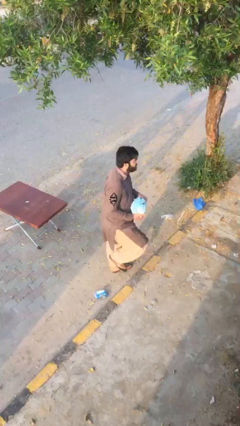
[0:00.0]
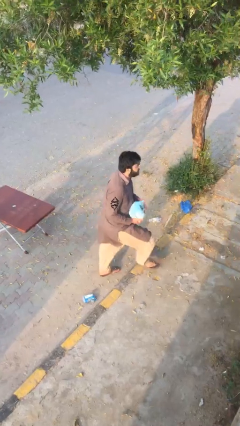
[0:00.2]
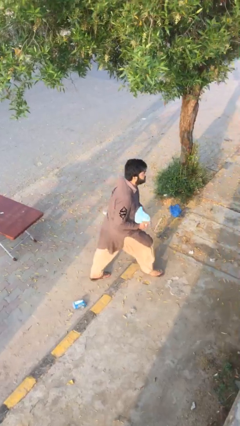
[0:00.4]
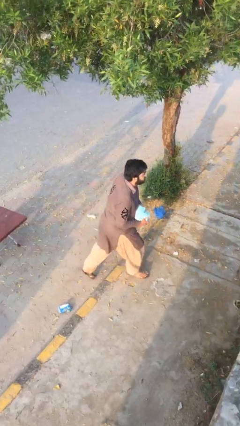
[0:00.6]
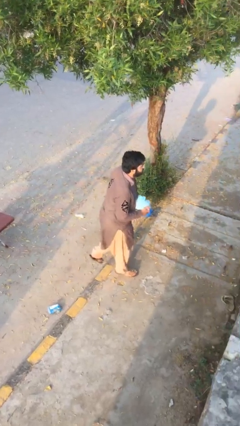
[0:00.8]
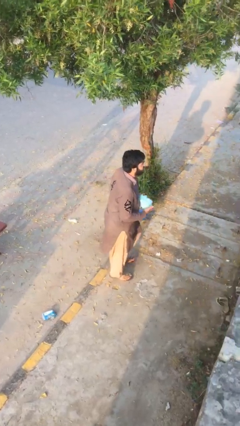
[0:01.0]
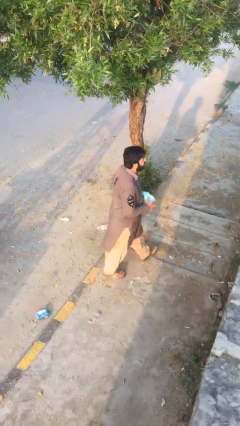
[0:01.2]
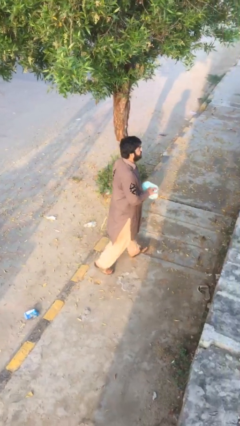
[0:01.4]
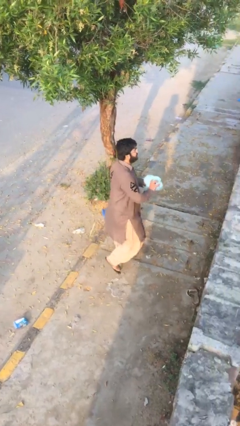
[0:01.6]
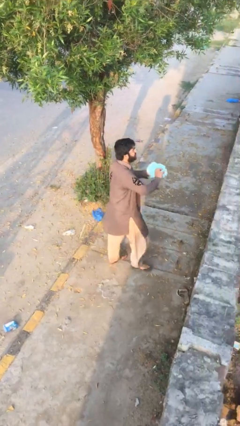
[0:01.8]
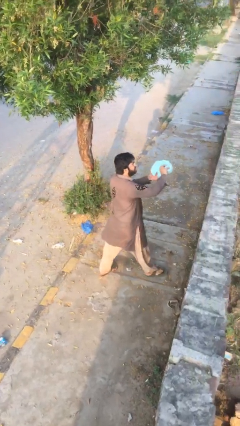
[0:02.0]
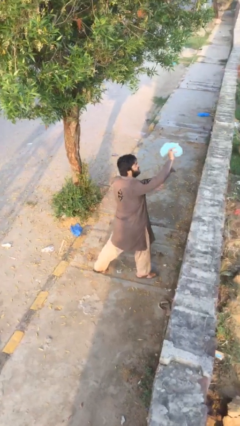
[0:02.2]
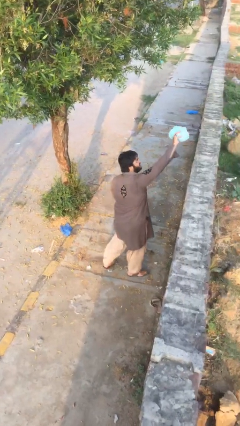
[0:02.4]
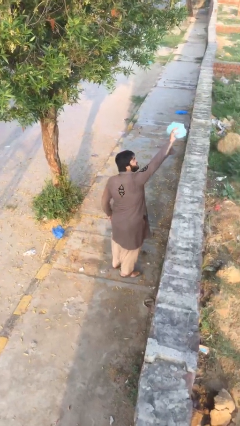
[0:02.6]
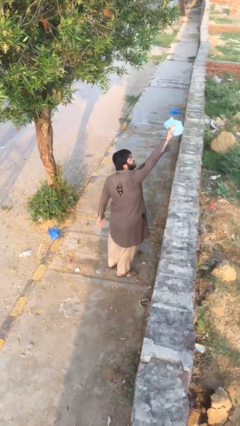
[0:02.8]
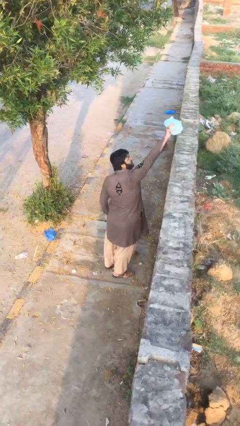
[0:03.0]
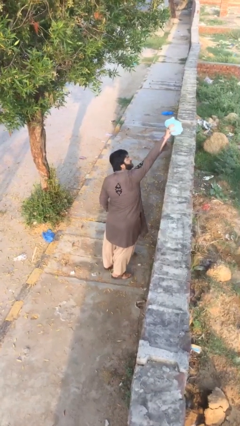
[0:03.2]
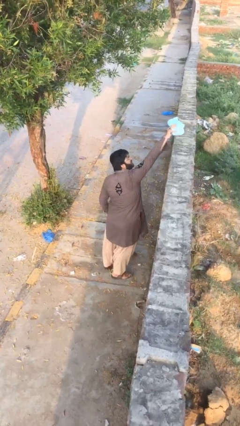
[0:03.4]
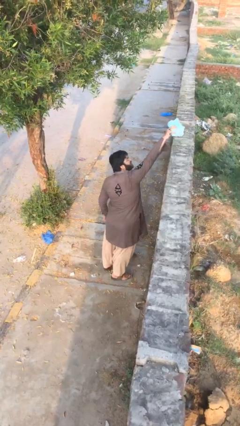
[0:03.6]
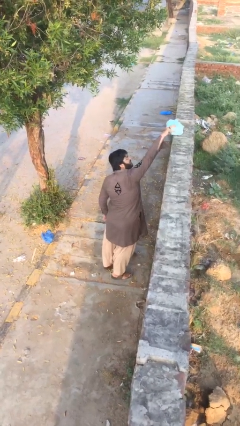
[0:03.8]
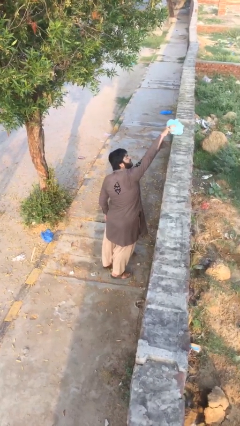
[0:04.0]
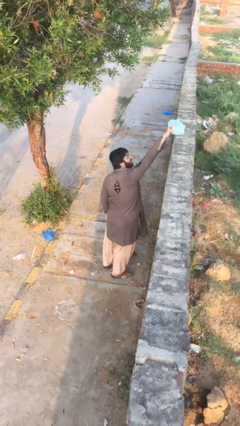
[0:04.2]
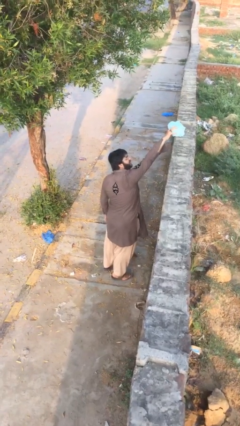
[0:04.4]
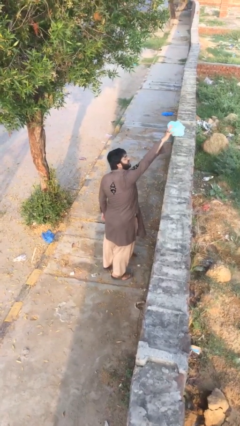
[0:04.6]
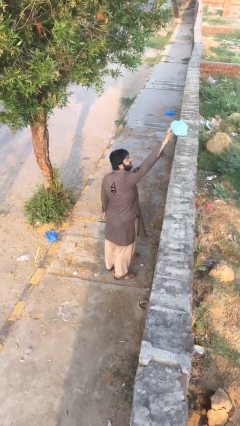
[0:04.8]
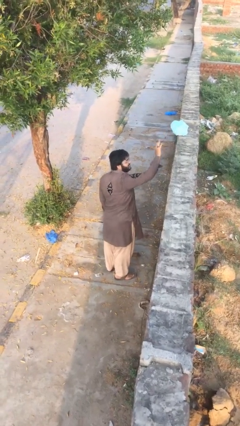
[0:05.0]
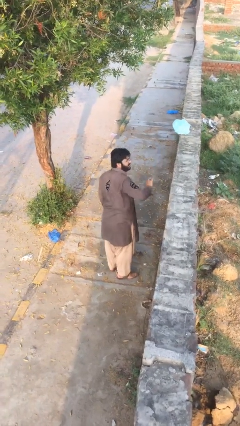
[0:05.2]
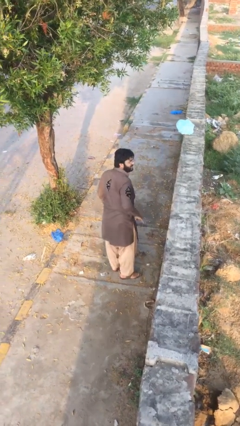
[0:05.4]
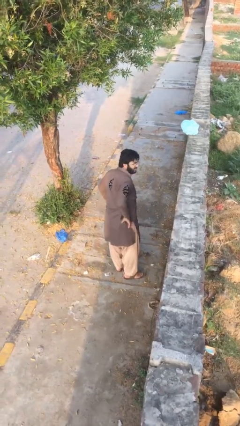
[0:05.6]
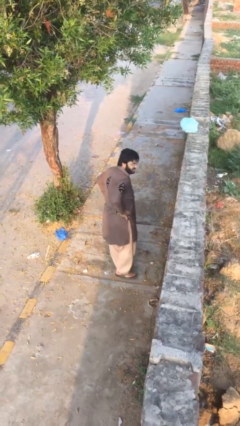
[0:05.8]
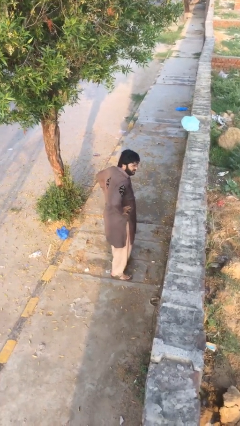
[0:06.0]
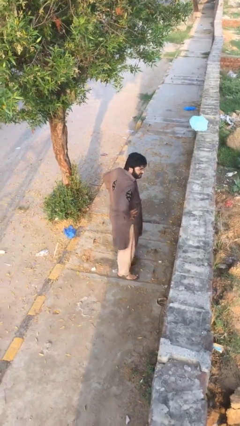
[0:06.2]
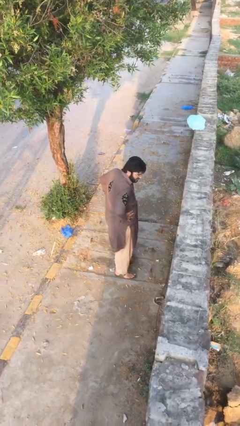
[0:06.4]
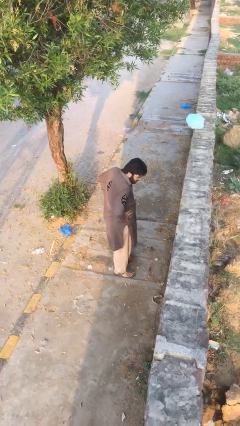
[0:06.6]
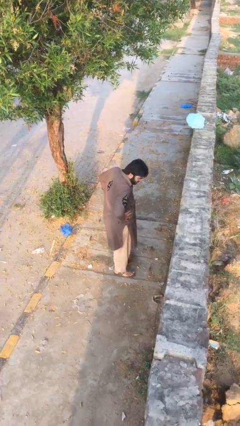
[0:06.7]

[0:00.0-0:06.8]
person puts down object on shelf

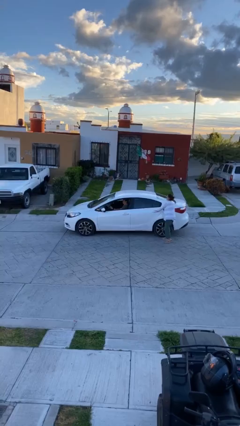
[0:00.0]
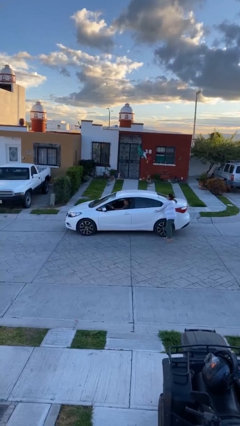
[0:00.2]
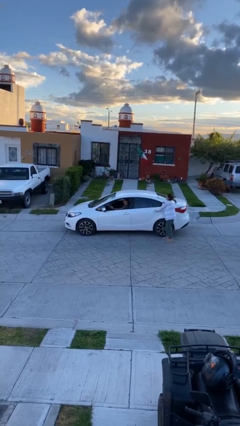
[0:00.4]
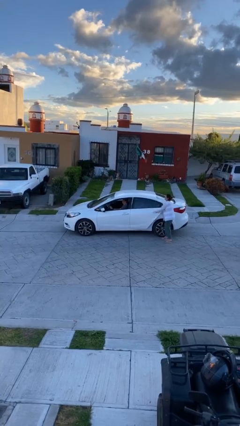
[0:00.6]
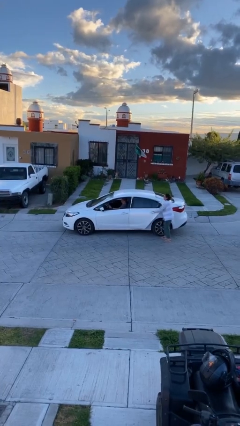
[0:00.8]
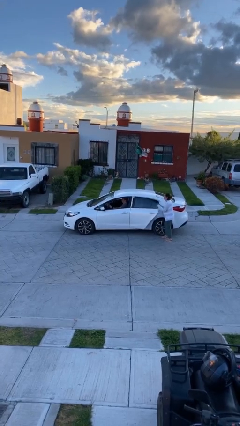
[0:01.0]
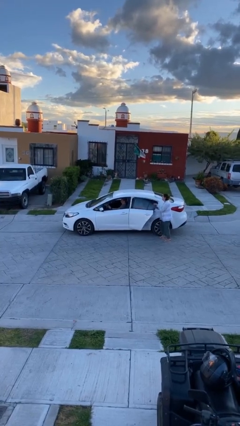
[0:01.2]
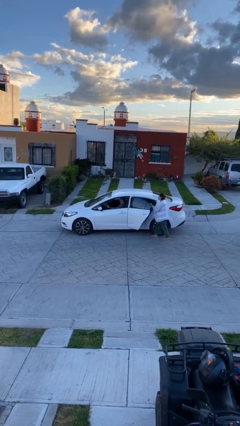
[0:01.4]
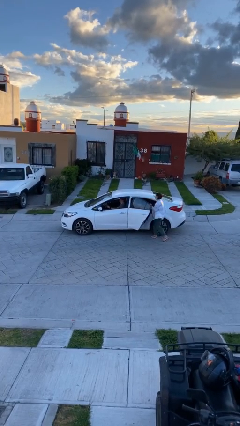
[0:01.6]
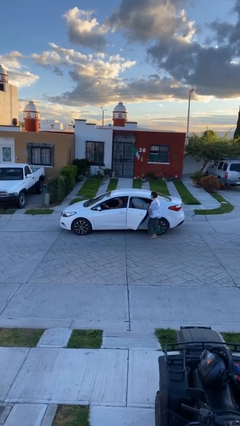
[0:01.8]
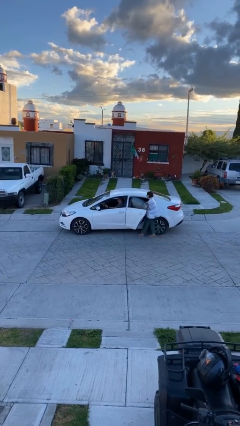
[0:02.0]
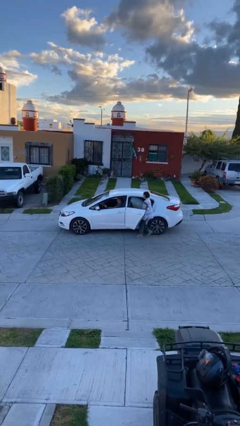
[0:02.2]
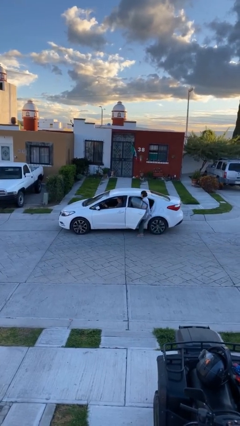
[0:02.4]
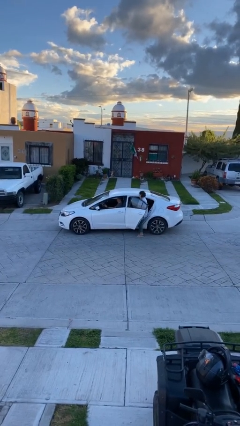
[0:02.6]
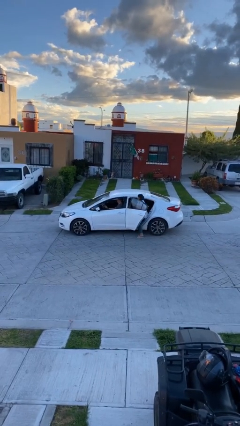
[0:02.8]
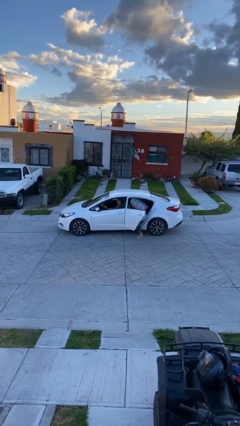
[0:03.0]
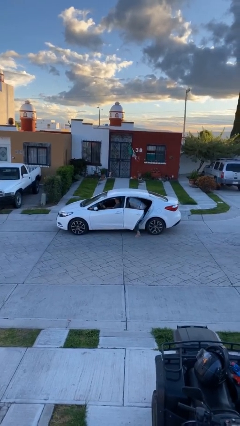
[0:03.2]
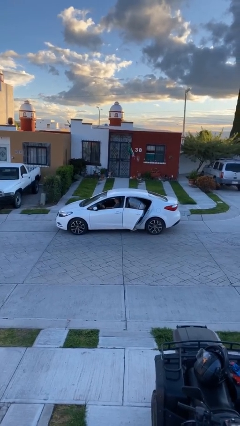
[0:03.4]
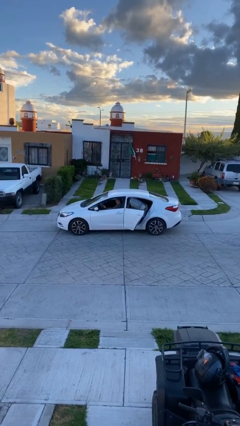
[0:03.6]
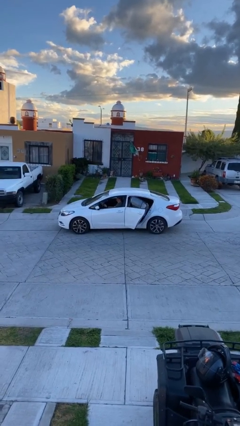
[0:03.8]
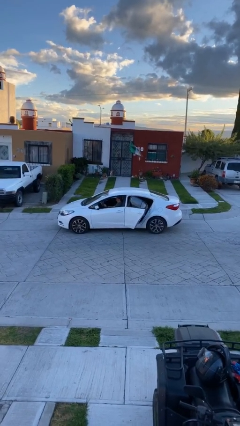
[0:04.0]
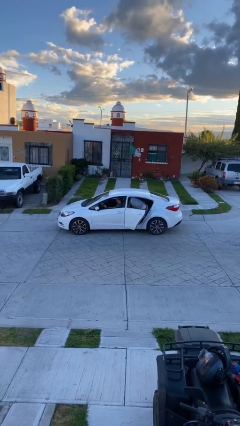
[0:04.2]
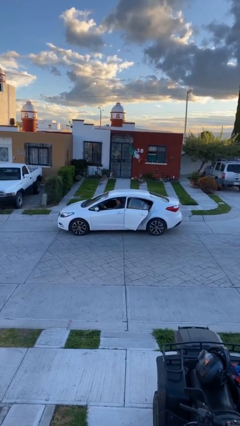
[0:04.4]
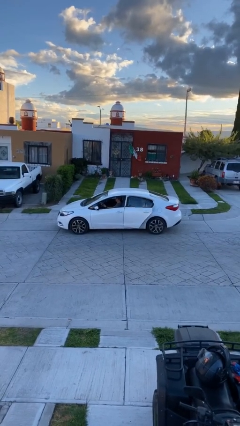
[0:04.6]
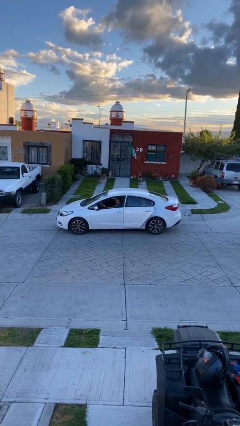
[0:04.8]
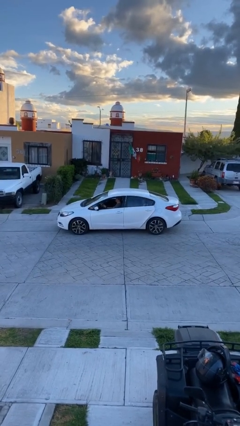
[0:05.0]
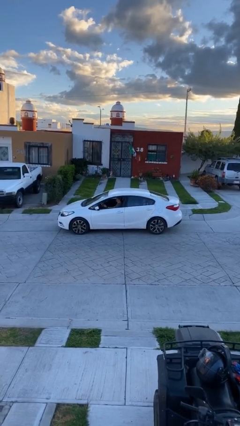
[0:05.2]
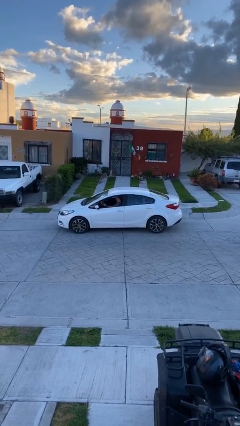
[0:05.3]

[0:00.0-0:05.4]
car picks up person

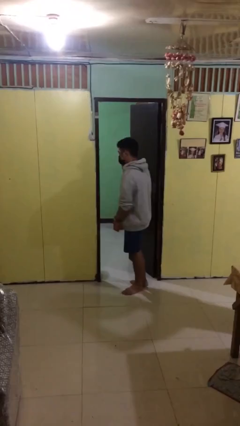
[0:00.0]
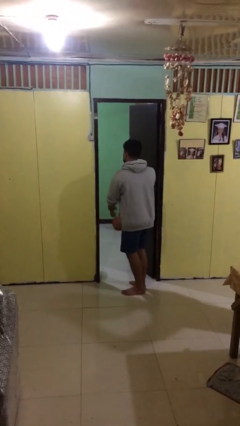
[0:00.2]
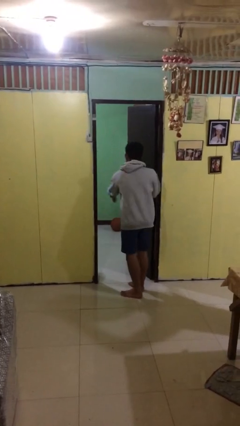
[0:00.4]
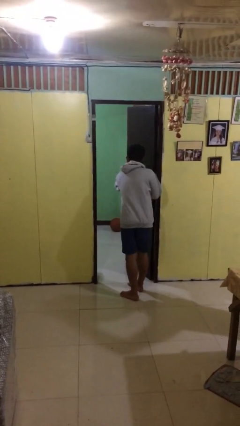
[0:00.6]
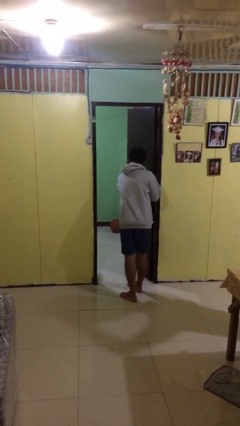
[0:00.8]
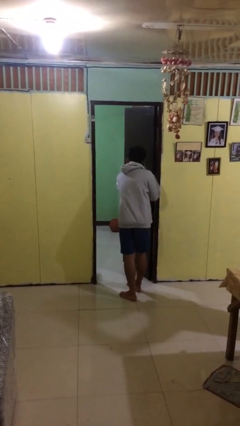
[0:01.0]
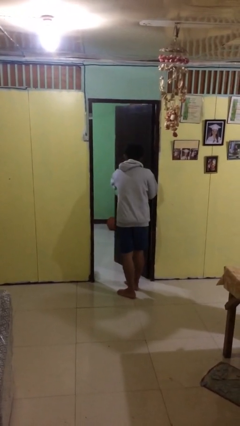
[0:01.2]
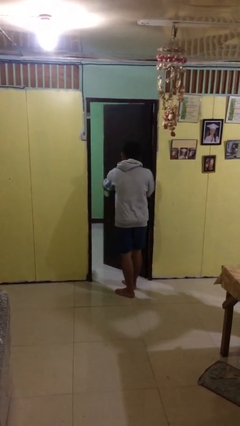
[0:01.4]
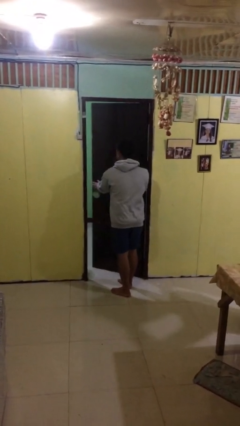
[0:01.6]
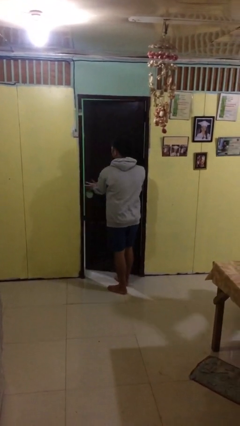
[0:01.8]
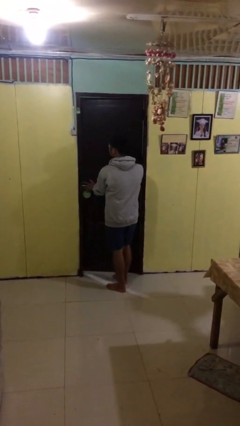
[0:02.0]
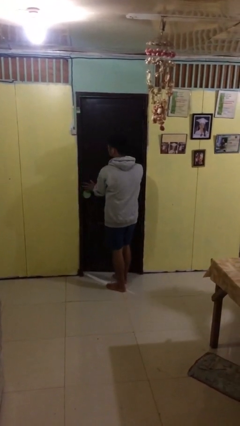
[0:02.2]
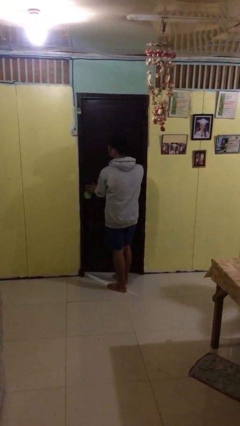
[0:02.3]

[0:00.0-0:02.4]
person closes facility door

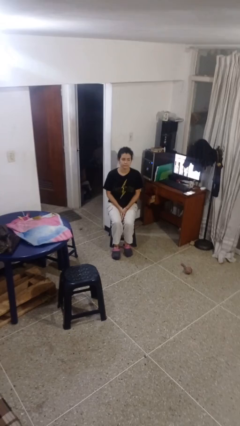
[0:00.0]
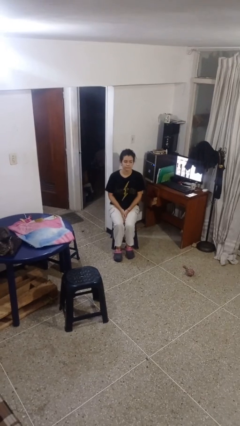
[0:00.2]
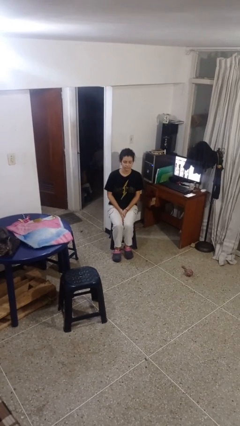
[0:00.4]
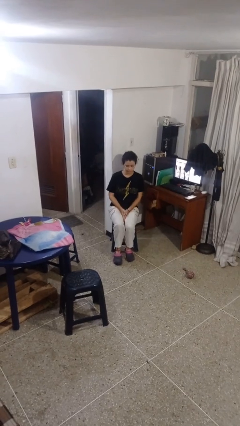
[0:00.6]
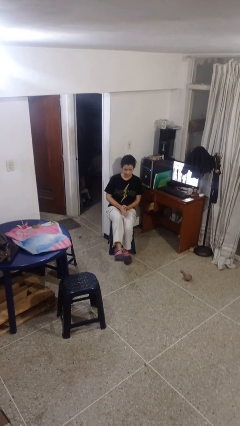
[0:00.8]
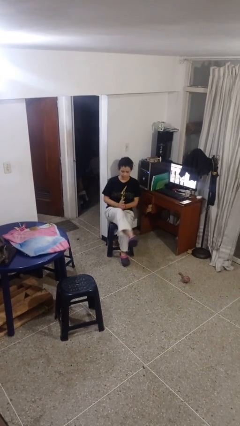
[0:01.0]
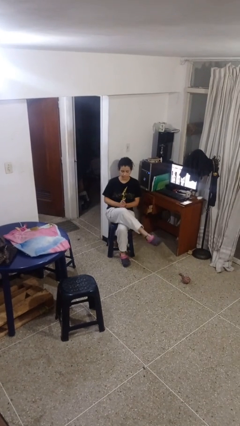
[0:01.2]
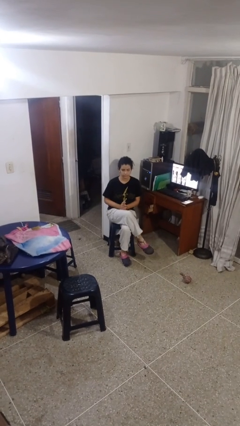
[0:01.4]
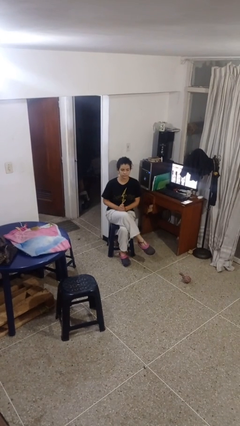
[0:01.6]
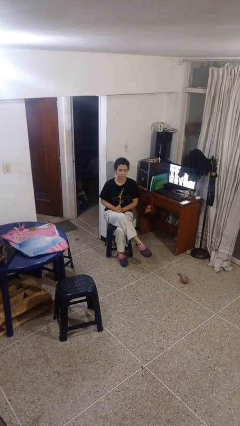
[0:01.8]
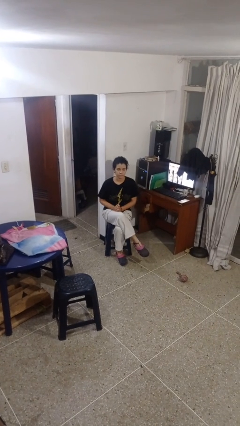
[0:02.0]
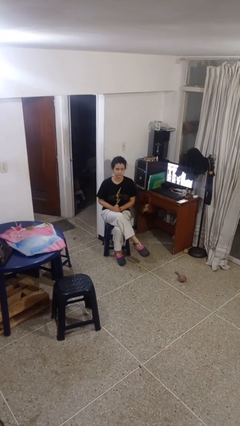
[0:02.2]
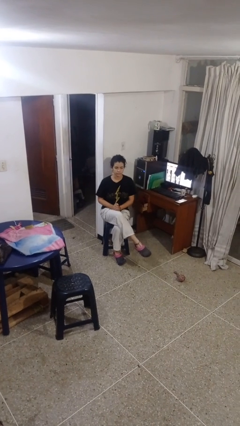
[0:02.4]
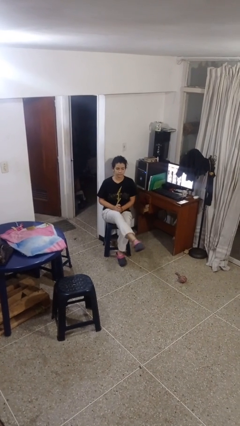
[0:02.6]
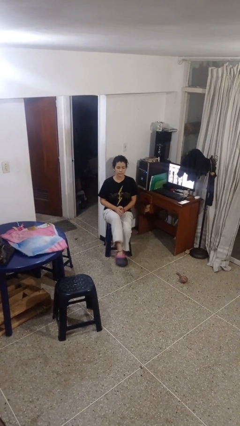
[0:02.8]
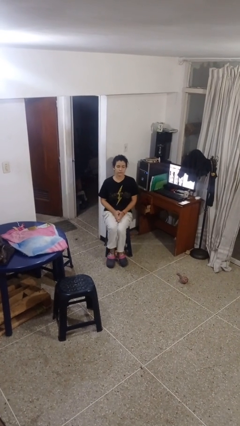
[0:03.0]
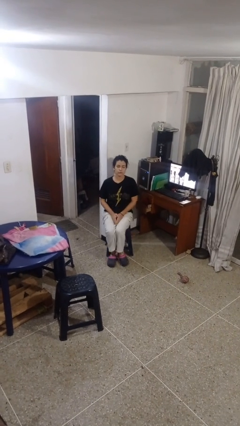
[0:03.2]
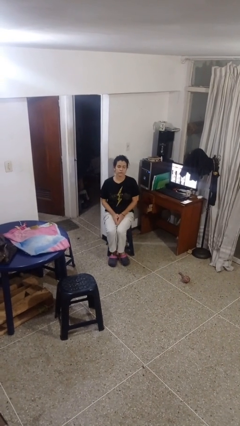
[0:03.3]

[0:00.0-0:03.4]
person crosses legs
